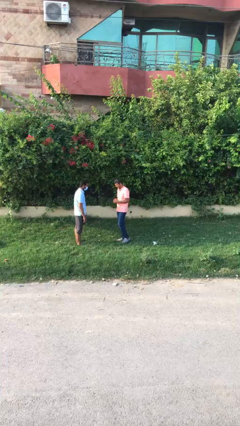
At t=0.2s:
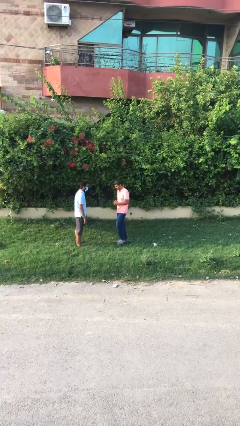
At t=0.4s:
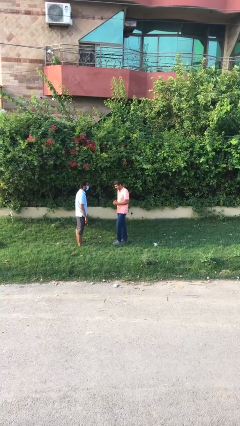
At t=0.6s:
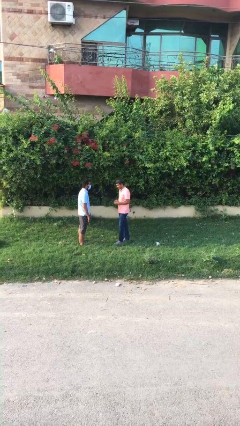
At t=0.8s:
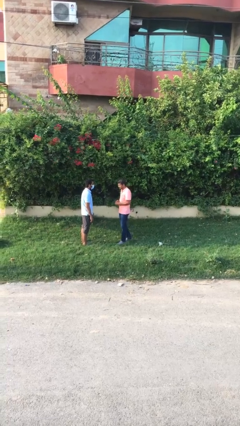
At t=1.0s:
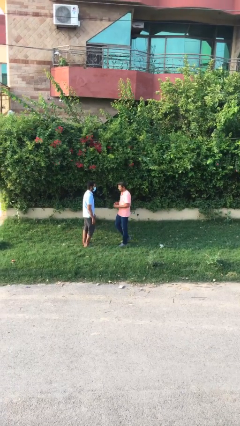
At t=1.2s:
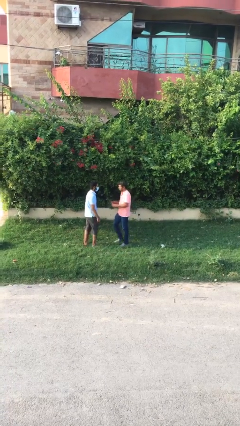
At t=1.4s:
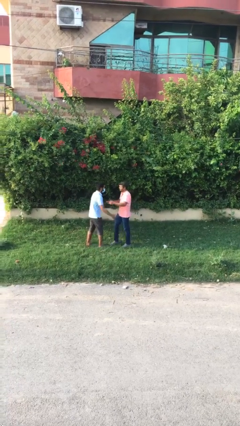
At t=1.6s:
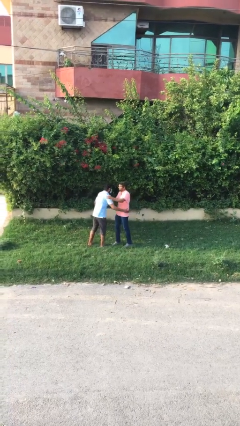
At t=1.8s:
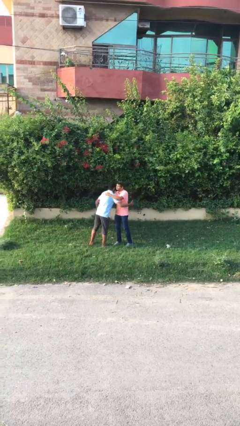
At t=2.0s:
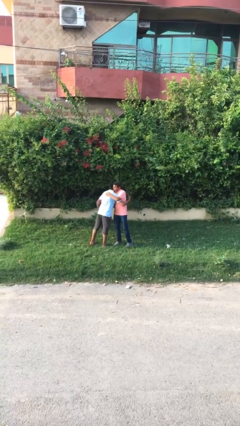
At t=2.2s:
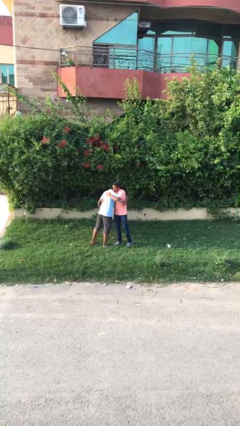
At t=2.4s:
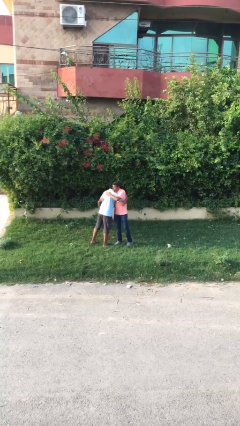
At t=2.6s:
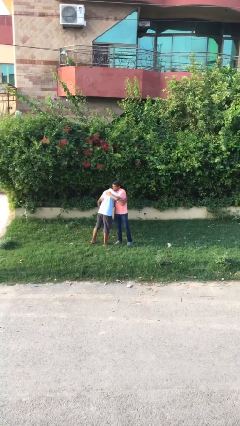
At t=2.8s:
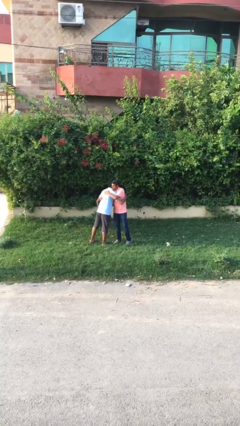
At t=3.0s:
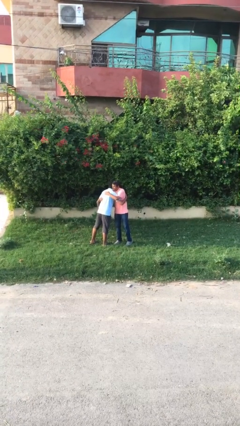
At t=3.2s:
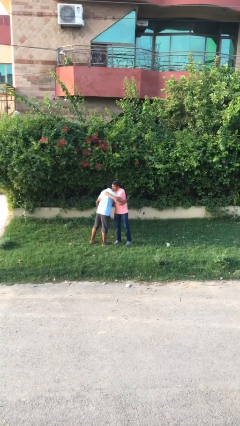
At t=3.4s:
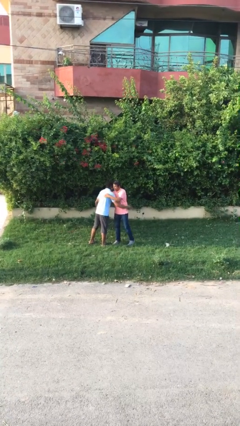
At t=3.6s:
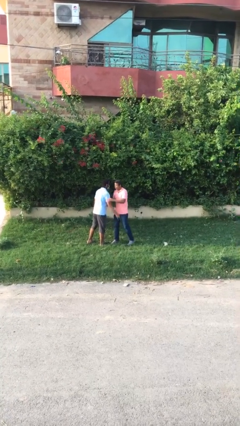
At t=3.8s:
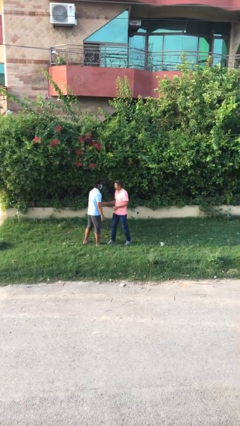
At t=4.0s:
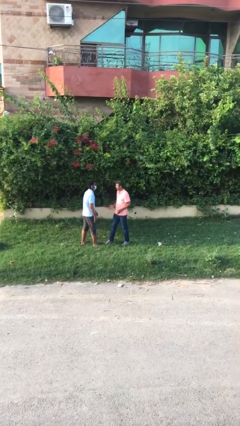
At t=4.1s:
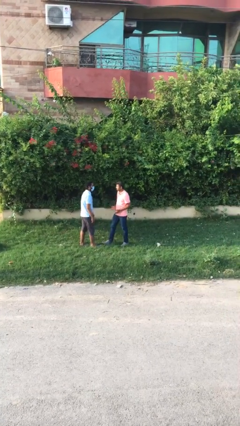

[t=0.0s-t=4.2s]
person embraces person

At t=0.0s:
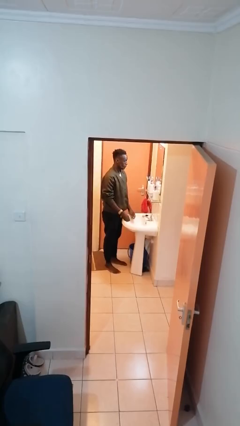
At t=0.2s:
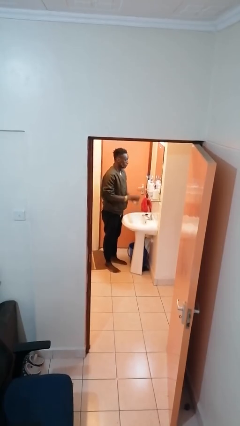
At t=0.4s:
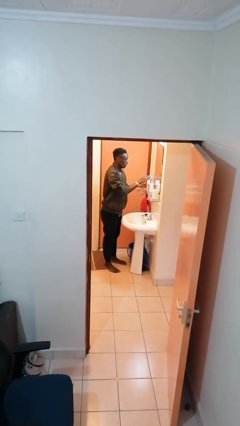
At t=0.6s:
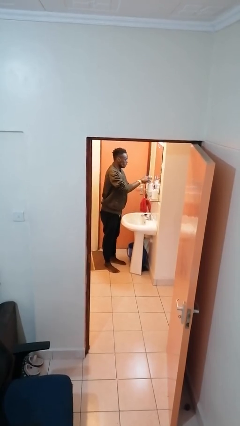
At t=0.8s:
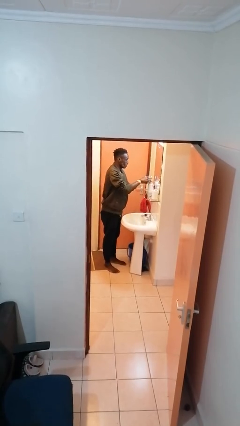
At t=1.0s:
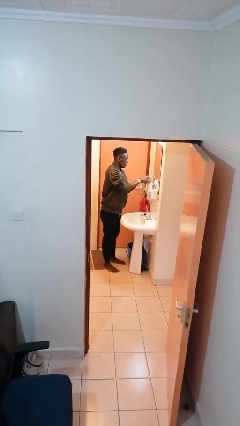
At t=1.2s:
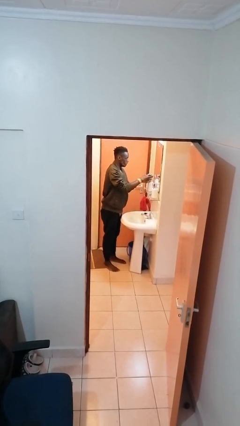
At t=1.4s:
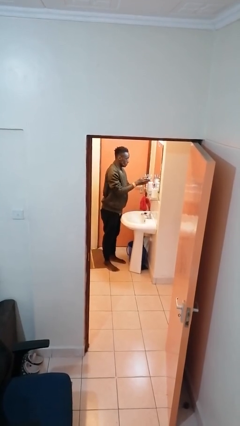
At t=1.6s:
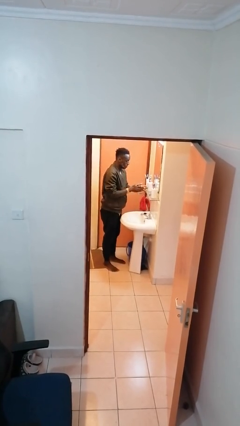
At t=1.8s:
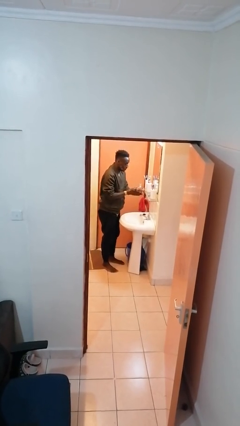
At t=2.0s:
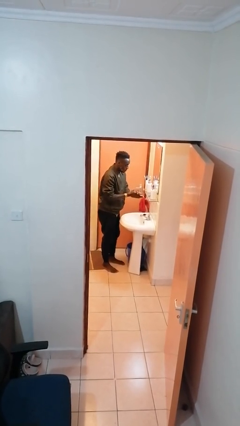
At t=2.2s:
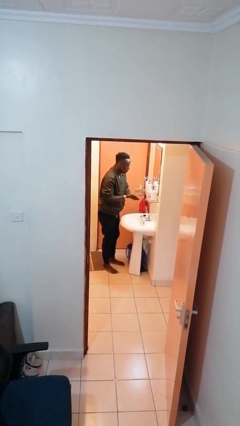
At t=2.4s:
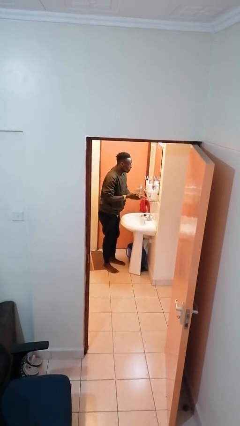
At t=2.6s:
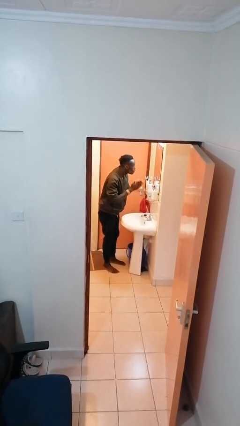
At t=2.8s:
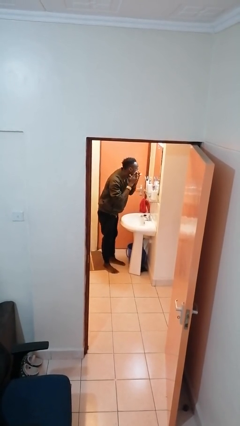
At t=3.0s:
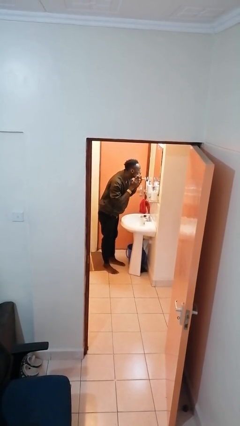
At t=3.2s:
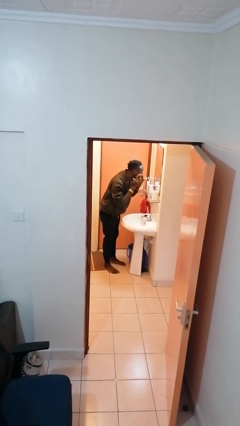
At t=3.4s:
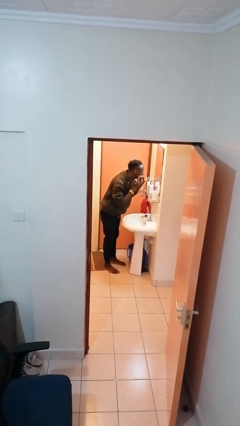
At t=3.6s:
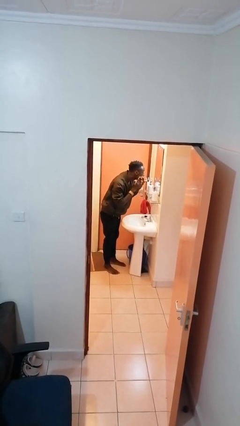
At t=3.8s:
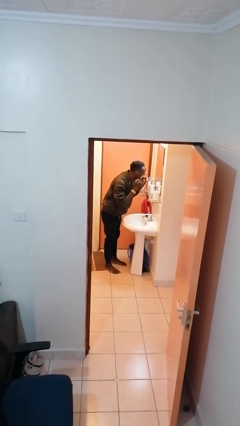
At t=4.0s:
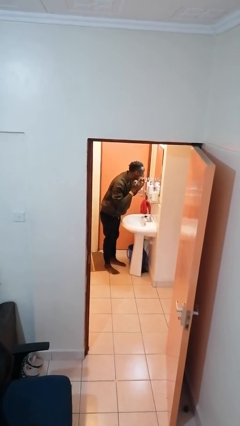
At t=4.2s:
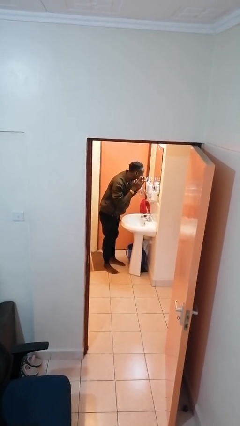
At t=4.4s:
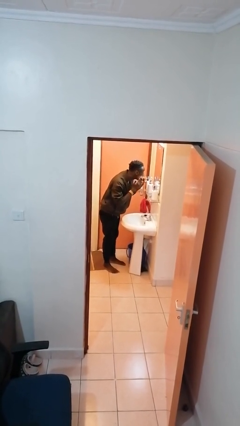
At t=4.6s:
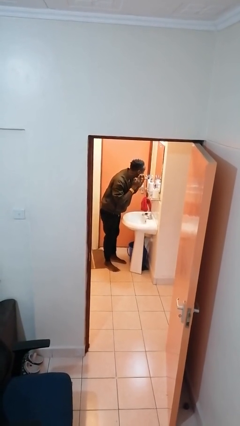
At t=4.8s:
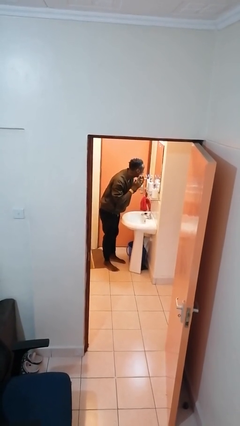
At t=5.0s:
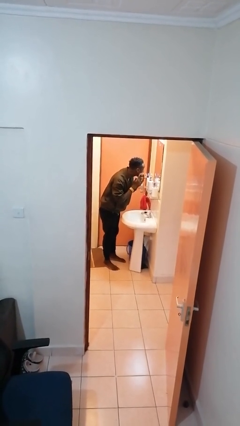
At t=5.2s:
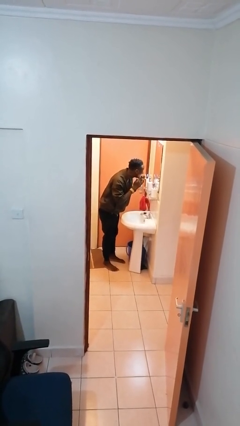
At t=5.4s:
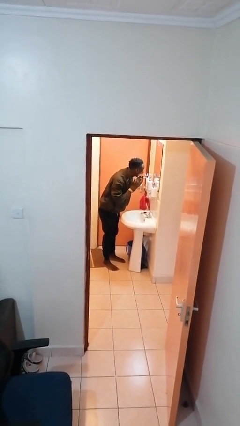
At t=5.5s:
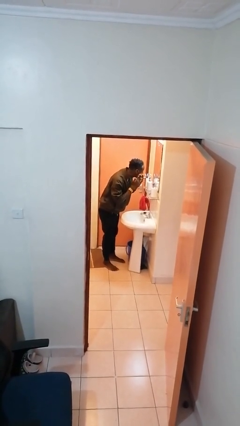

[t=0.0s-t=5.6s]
person applies shaving cream

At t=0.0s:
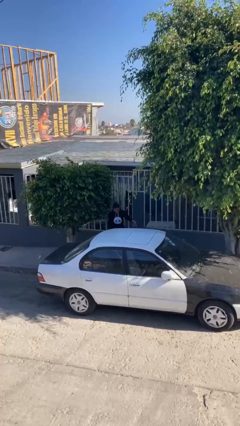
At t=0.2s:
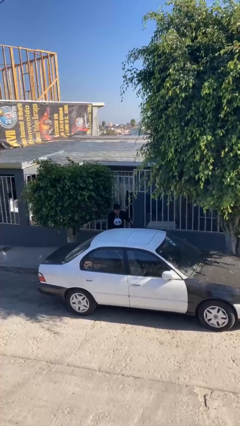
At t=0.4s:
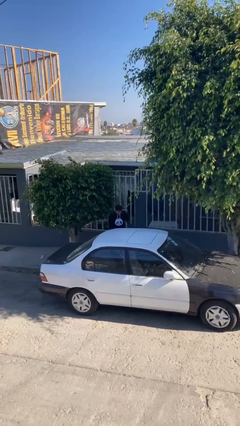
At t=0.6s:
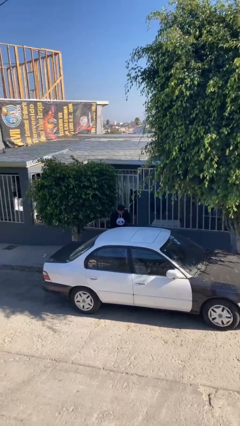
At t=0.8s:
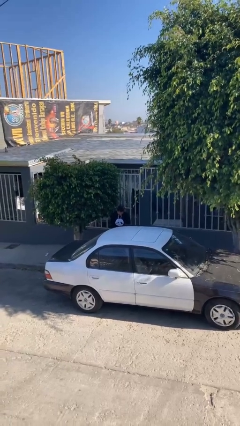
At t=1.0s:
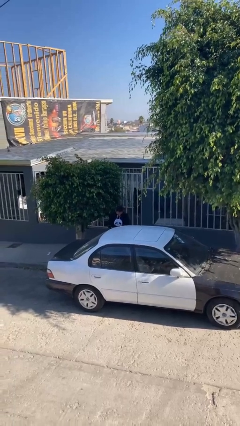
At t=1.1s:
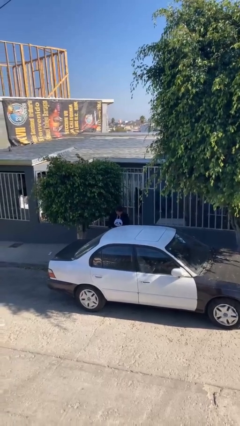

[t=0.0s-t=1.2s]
person closes car door

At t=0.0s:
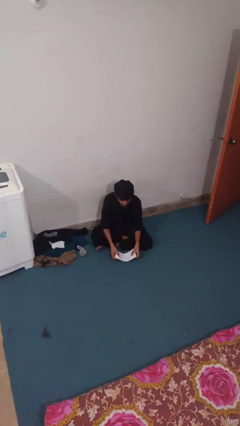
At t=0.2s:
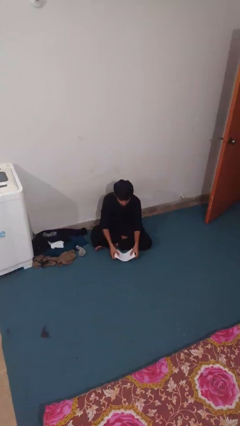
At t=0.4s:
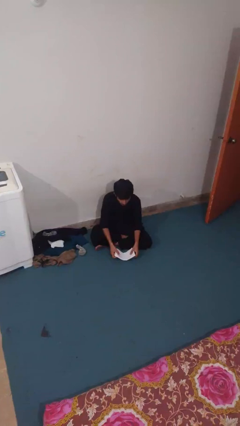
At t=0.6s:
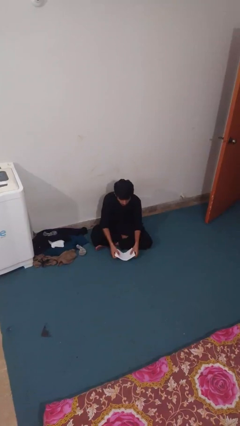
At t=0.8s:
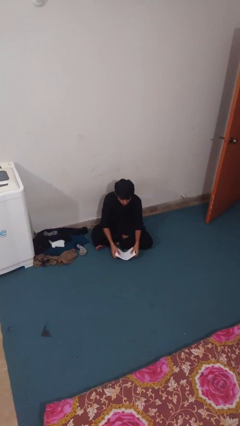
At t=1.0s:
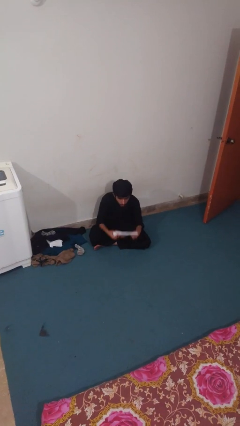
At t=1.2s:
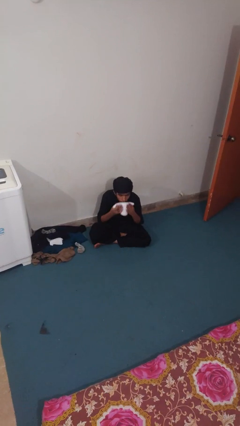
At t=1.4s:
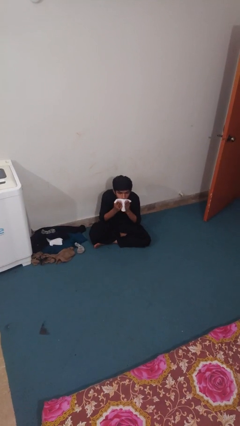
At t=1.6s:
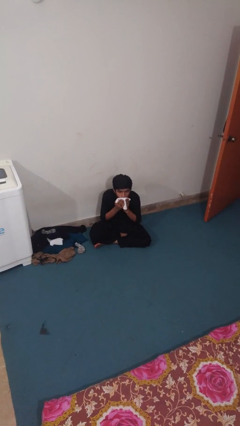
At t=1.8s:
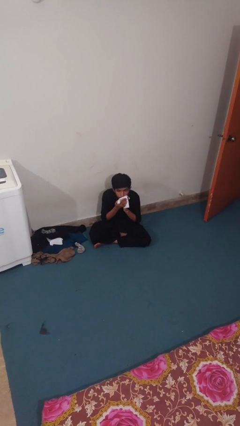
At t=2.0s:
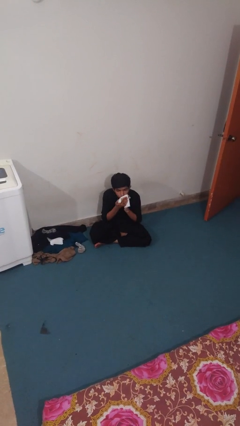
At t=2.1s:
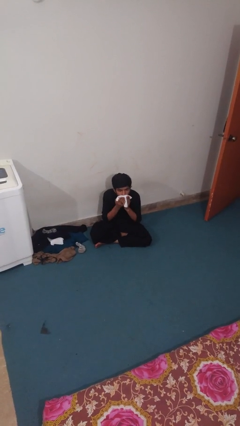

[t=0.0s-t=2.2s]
person wipes mouth with napkin

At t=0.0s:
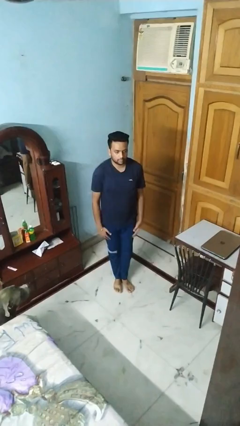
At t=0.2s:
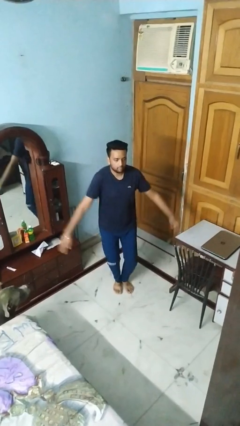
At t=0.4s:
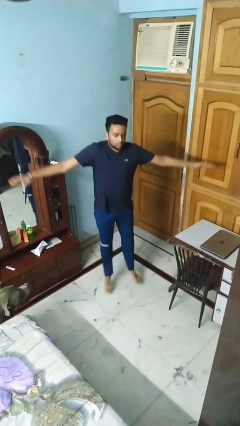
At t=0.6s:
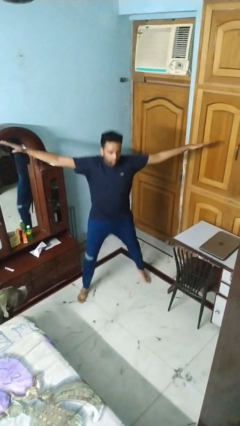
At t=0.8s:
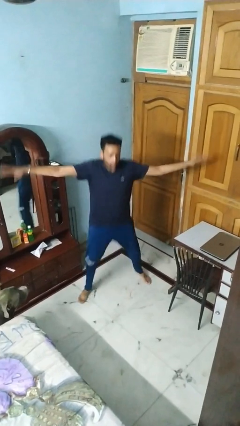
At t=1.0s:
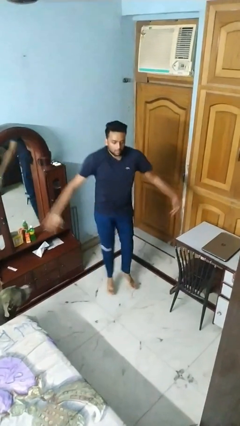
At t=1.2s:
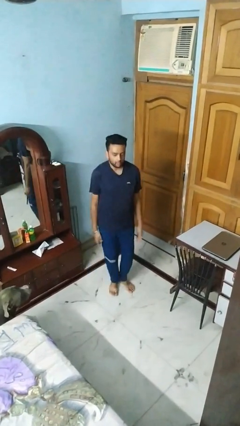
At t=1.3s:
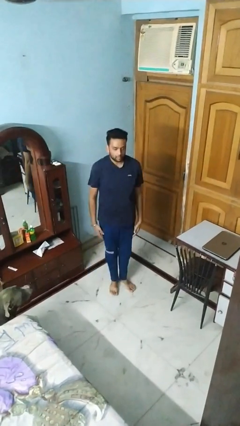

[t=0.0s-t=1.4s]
person exercises with jumping jacks

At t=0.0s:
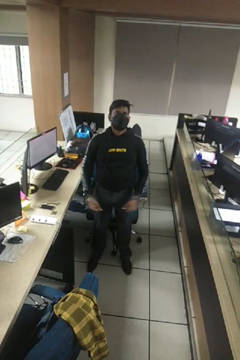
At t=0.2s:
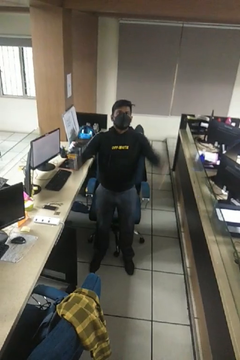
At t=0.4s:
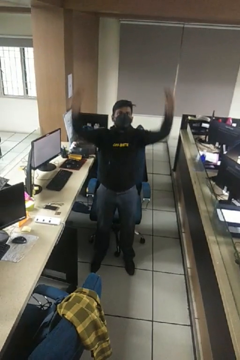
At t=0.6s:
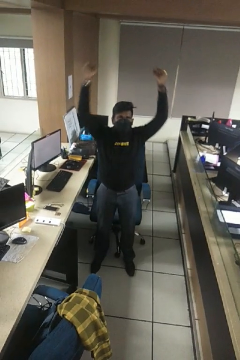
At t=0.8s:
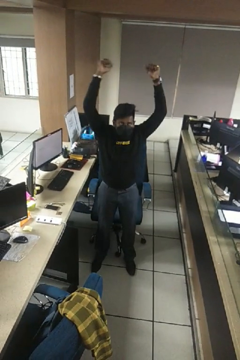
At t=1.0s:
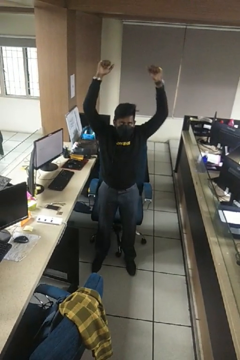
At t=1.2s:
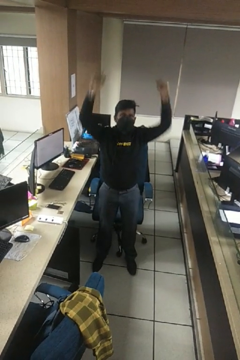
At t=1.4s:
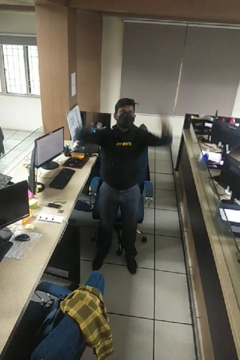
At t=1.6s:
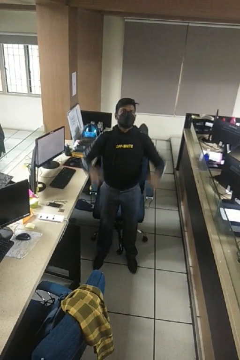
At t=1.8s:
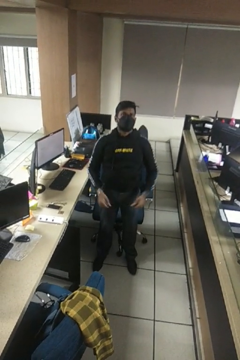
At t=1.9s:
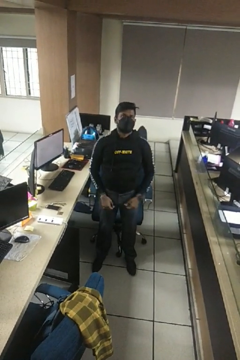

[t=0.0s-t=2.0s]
person stretches arms over head

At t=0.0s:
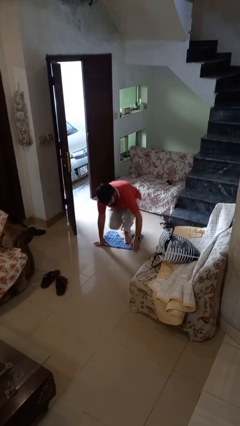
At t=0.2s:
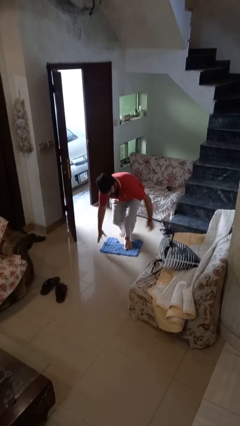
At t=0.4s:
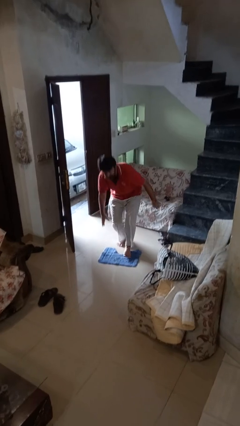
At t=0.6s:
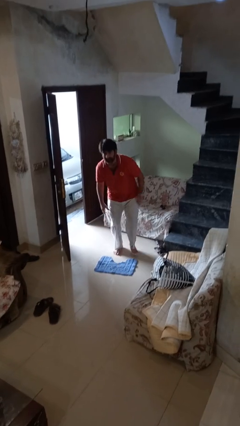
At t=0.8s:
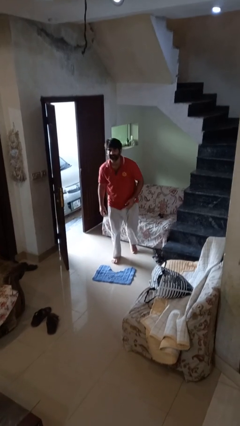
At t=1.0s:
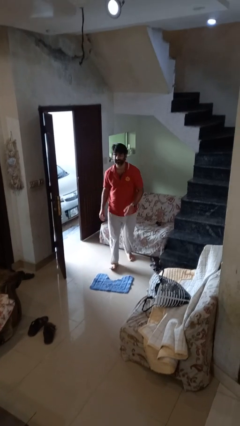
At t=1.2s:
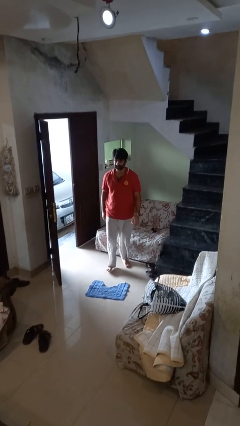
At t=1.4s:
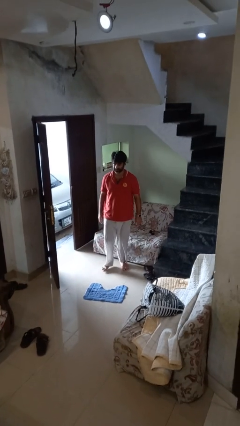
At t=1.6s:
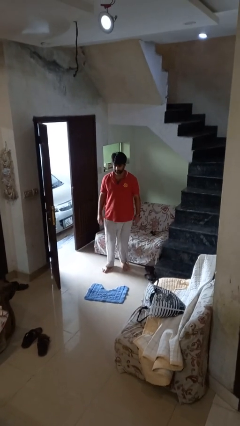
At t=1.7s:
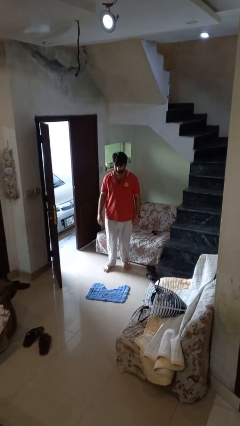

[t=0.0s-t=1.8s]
person stands up from floor
